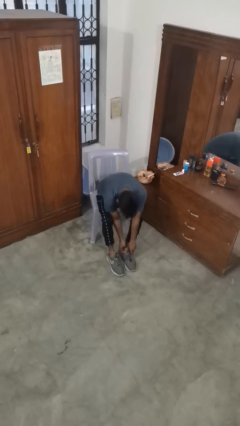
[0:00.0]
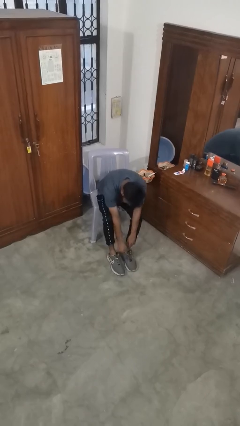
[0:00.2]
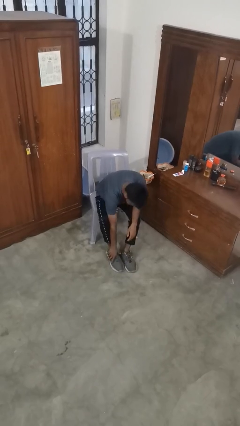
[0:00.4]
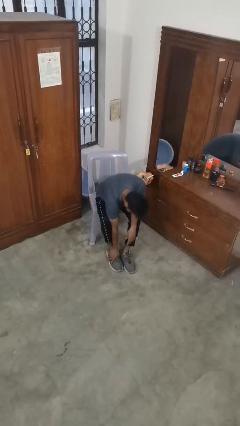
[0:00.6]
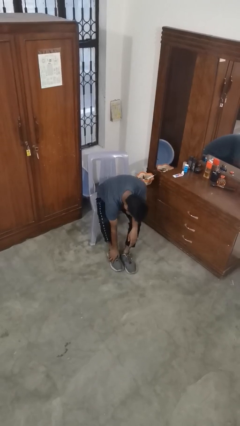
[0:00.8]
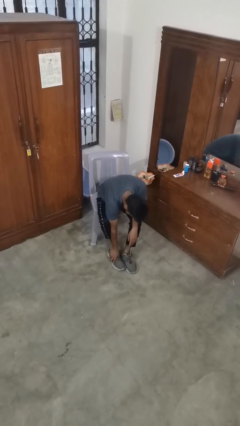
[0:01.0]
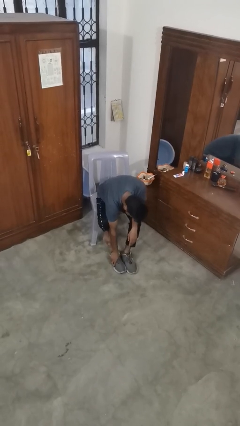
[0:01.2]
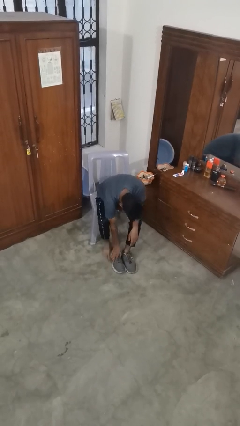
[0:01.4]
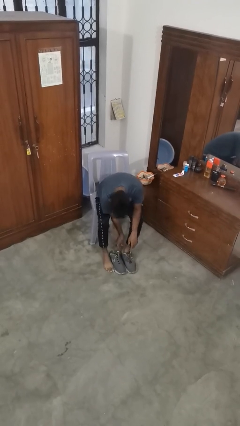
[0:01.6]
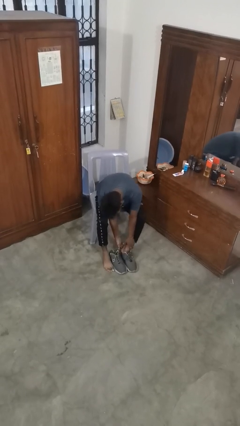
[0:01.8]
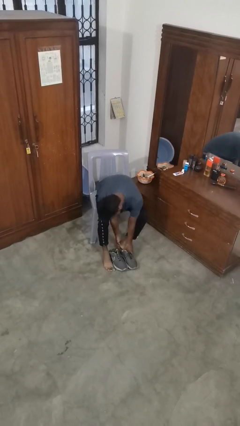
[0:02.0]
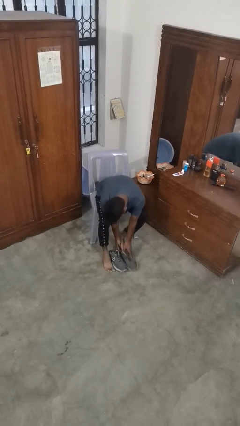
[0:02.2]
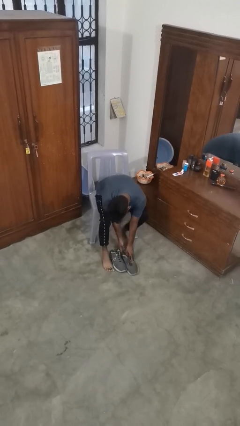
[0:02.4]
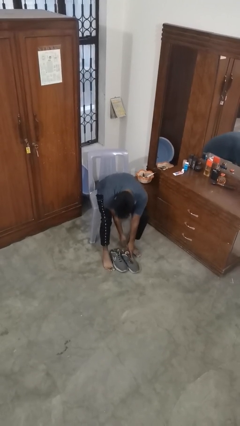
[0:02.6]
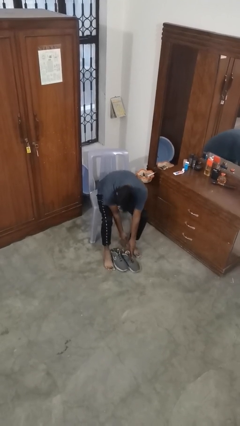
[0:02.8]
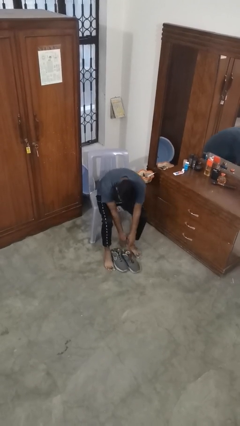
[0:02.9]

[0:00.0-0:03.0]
person takes off shoes

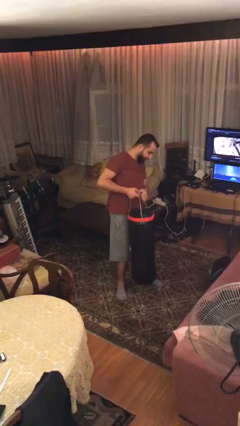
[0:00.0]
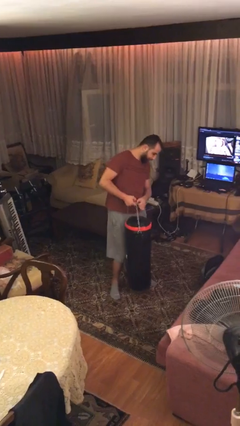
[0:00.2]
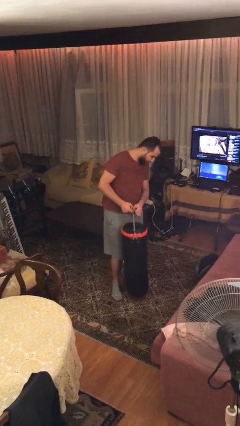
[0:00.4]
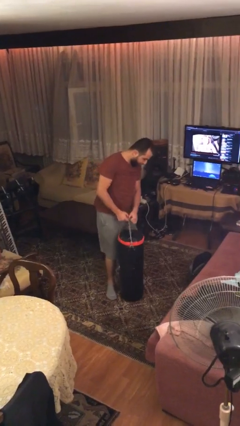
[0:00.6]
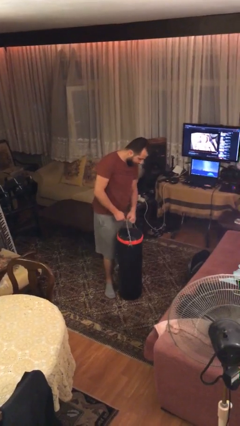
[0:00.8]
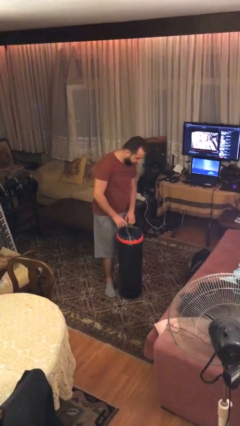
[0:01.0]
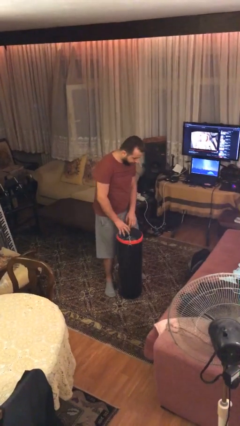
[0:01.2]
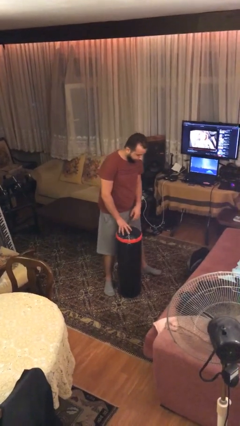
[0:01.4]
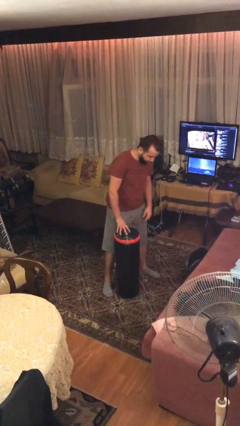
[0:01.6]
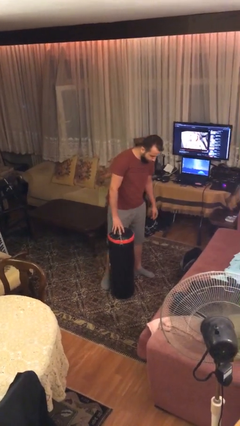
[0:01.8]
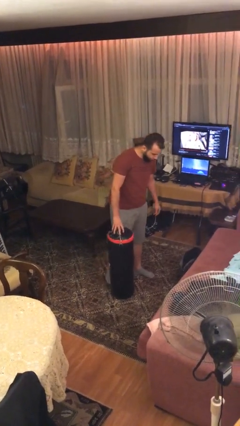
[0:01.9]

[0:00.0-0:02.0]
person puts down object on floor

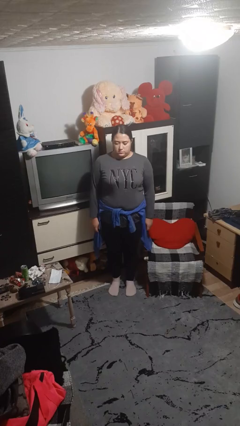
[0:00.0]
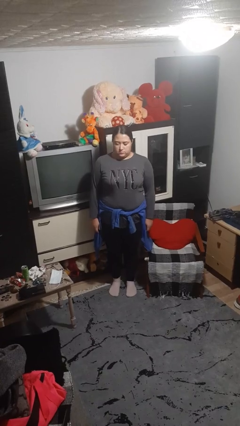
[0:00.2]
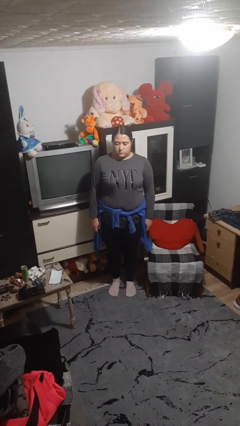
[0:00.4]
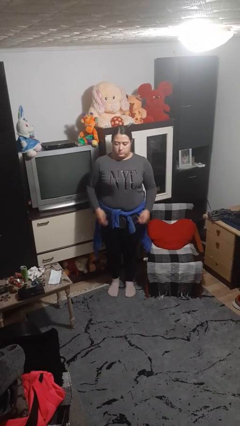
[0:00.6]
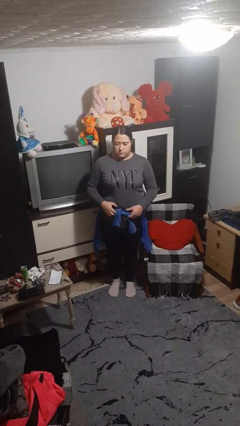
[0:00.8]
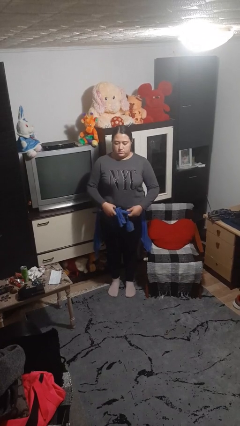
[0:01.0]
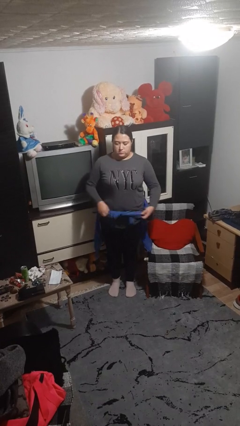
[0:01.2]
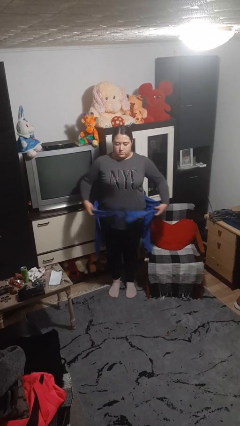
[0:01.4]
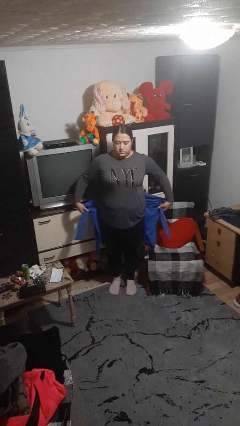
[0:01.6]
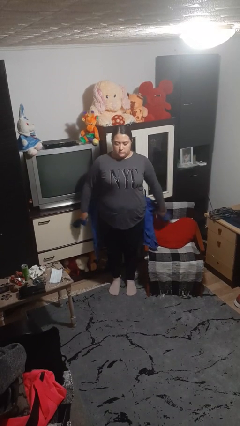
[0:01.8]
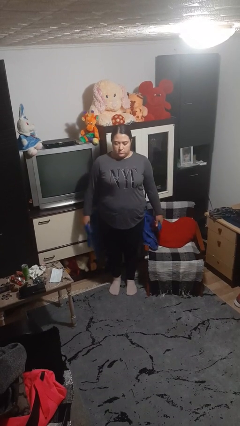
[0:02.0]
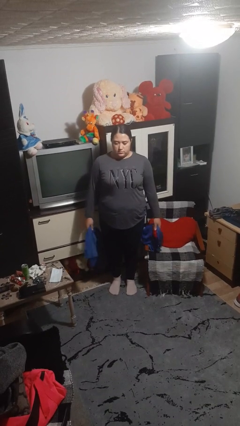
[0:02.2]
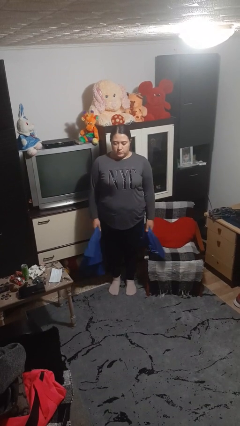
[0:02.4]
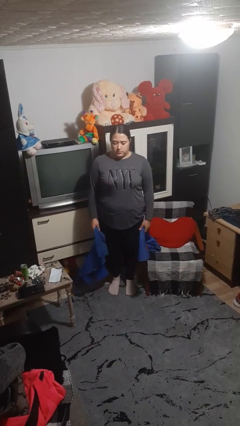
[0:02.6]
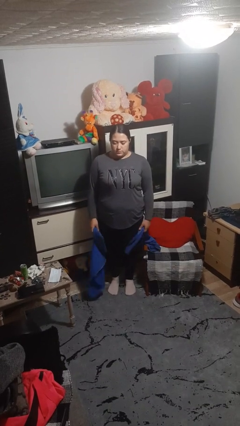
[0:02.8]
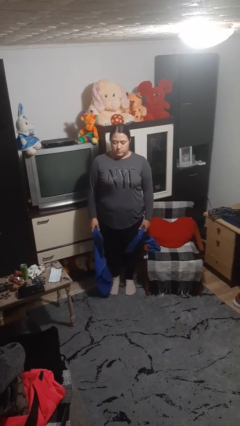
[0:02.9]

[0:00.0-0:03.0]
person unties jacket around waist

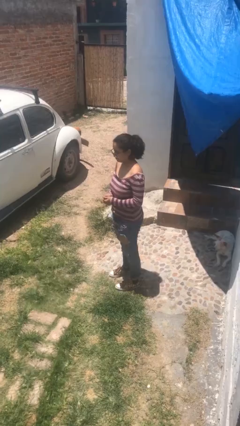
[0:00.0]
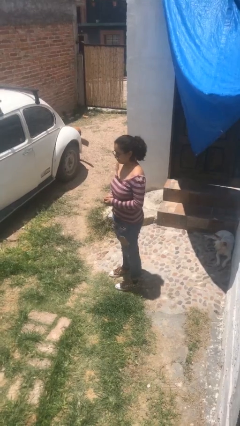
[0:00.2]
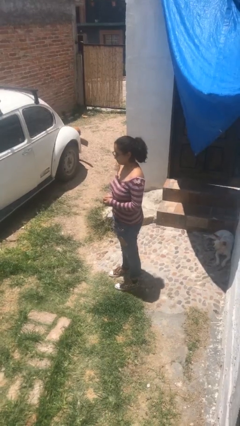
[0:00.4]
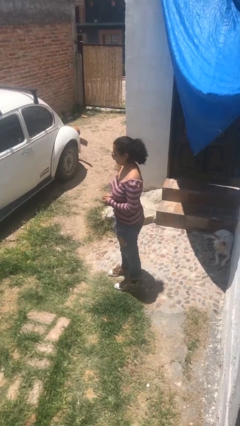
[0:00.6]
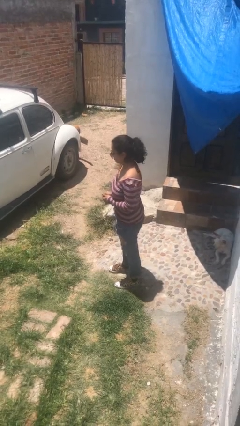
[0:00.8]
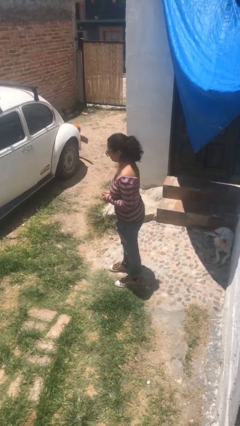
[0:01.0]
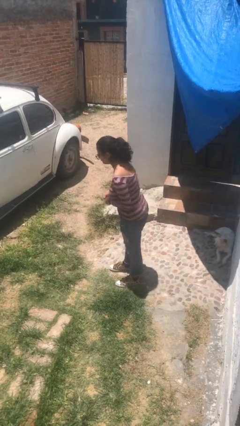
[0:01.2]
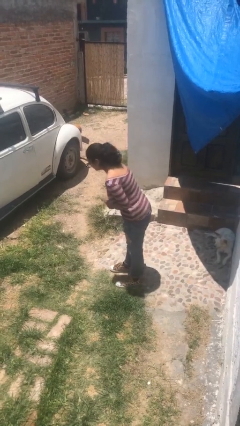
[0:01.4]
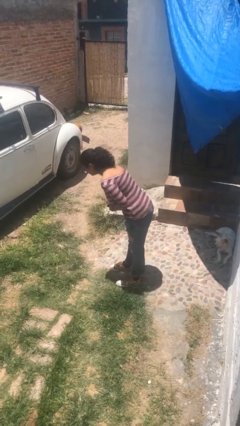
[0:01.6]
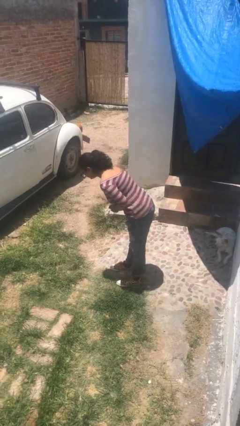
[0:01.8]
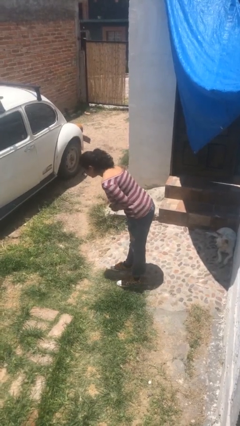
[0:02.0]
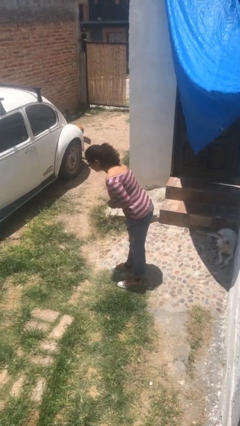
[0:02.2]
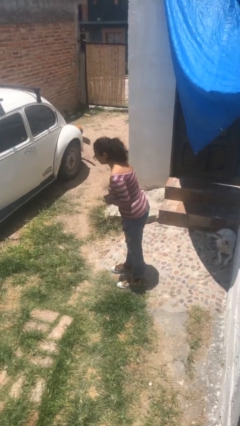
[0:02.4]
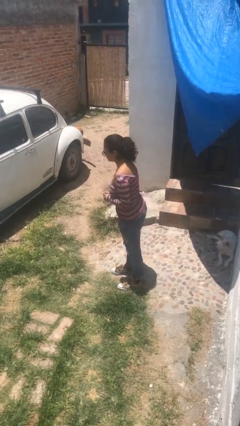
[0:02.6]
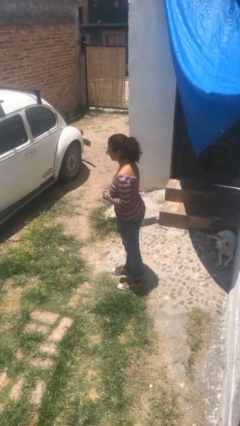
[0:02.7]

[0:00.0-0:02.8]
person bows

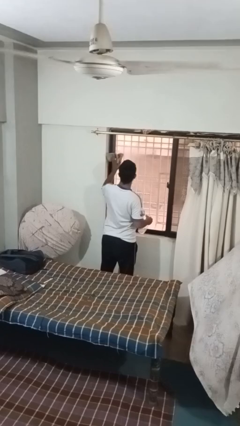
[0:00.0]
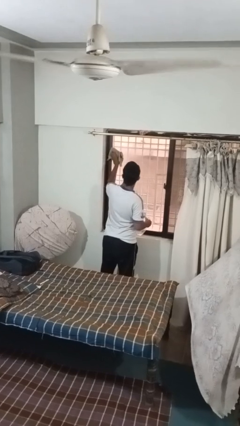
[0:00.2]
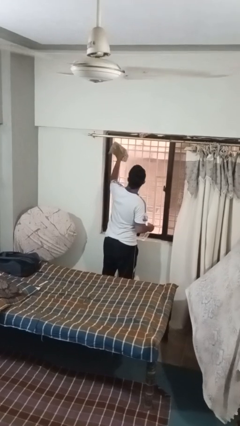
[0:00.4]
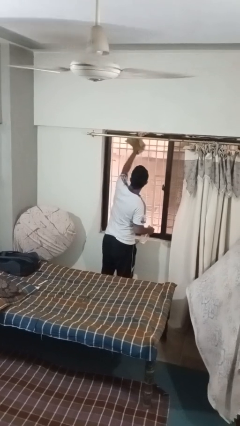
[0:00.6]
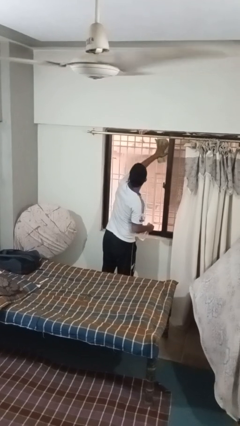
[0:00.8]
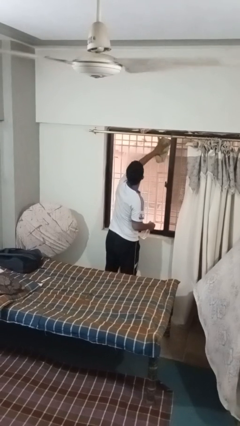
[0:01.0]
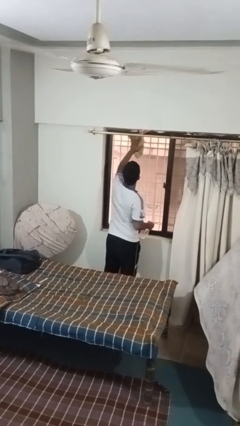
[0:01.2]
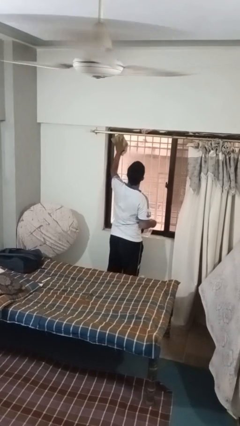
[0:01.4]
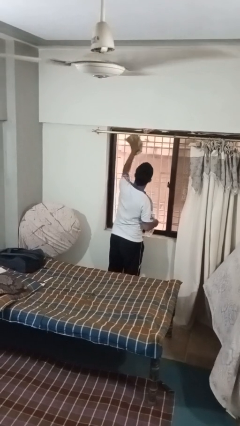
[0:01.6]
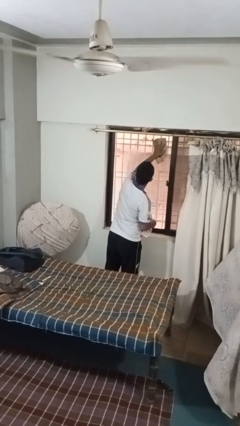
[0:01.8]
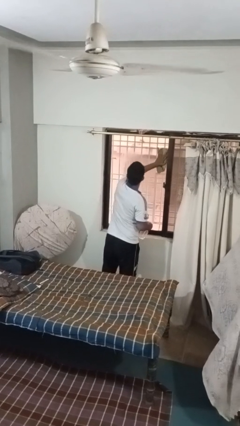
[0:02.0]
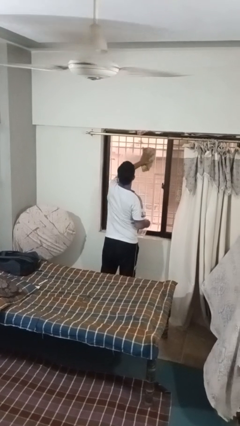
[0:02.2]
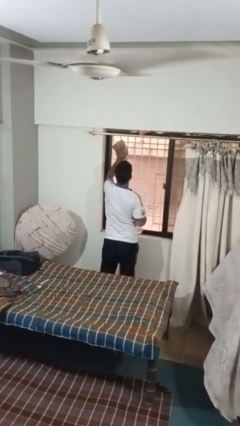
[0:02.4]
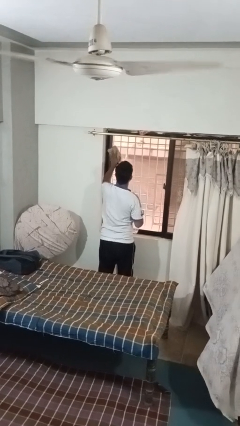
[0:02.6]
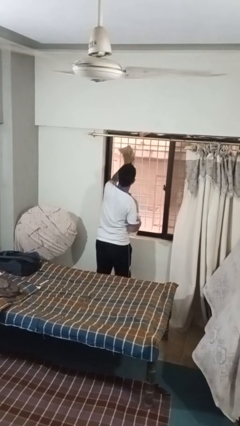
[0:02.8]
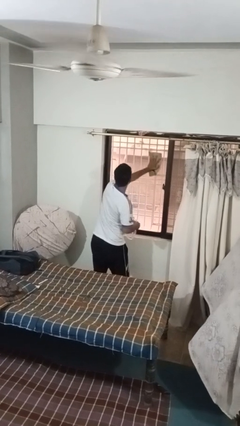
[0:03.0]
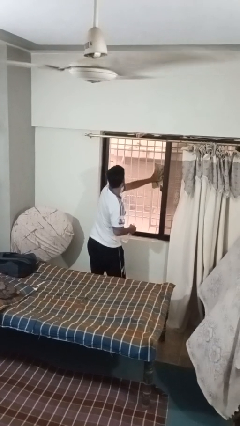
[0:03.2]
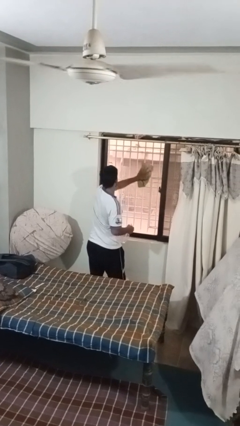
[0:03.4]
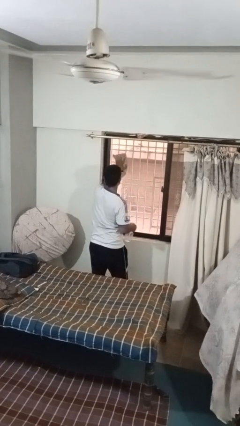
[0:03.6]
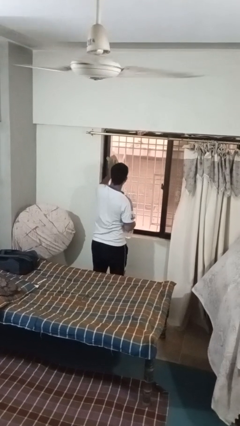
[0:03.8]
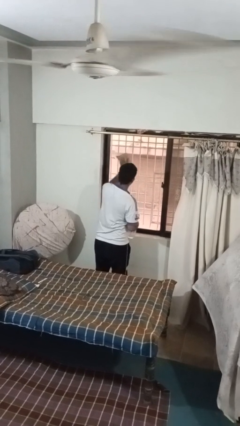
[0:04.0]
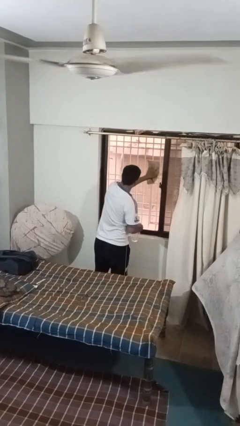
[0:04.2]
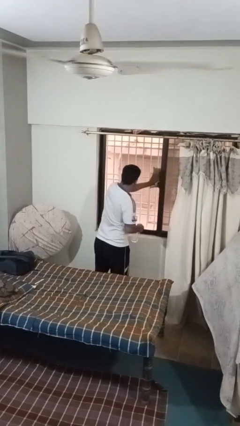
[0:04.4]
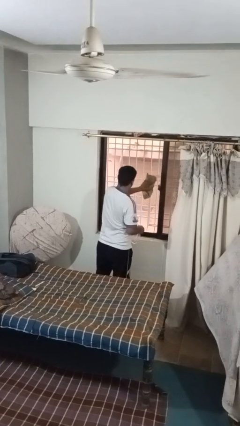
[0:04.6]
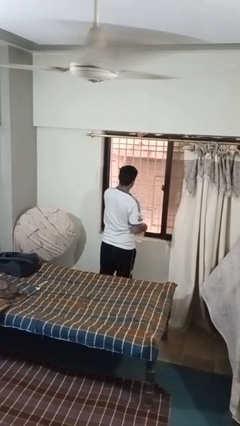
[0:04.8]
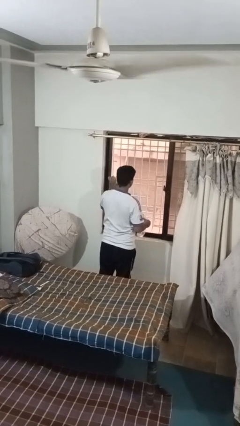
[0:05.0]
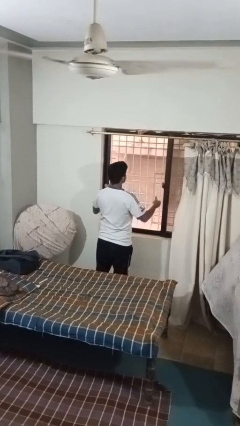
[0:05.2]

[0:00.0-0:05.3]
person washes window

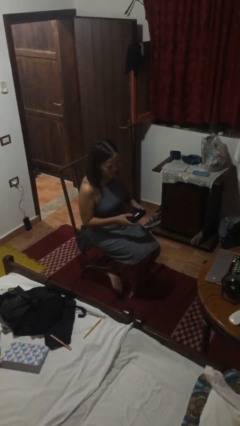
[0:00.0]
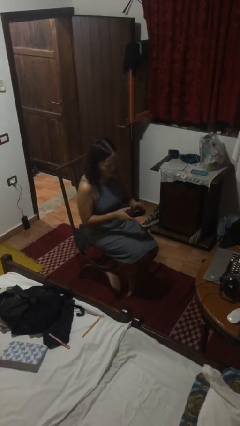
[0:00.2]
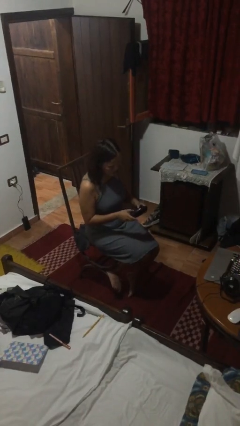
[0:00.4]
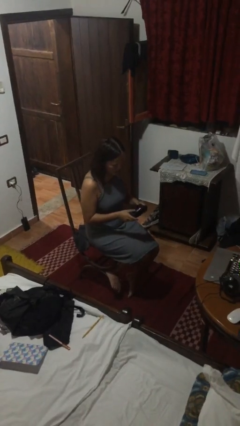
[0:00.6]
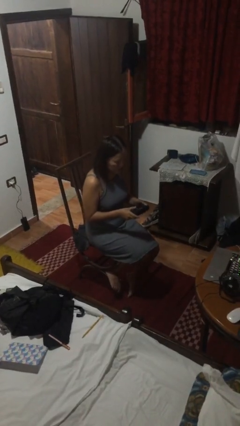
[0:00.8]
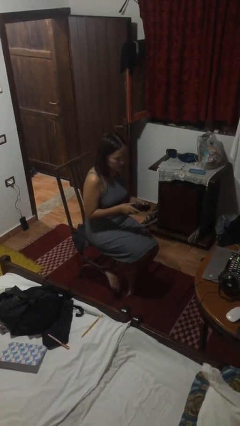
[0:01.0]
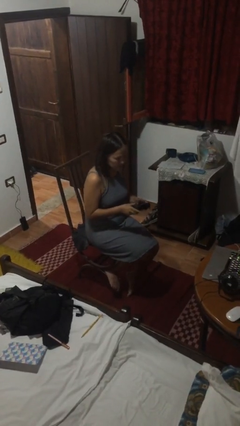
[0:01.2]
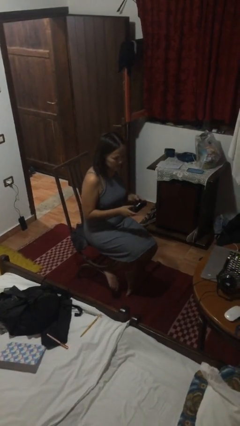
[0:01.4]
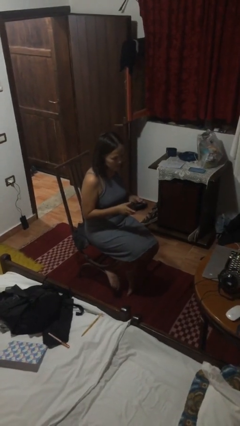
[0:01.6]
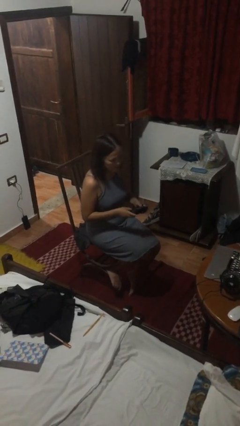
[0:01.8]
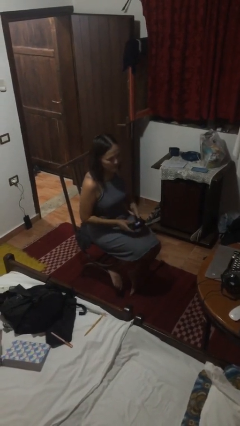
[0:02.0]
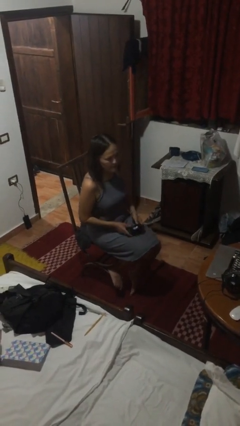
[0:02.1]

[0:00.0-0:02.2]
person interacts with handheld game
